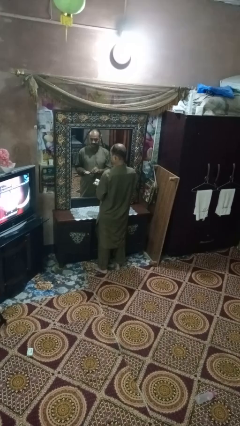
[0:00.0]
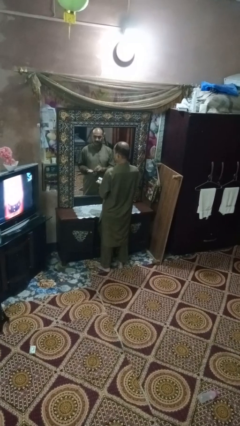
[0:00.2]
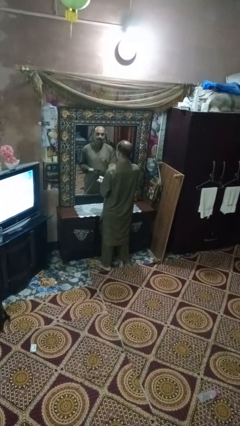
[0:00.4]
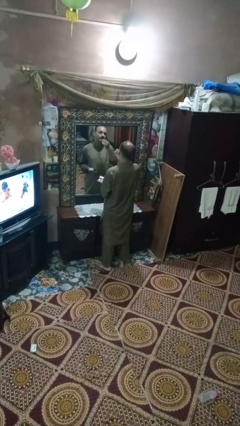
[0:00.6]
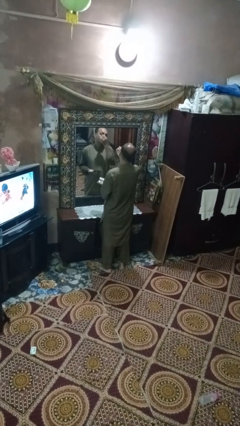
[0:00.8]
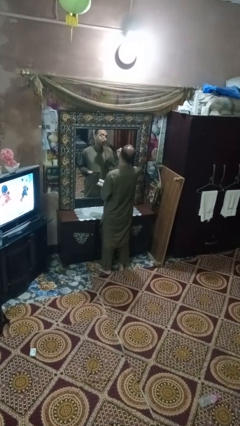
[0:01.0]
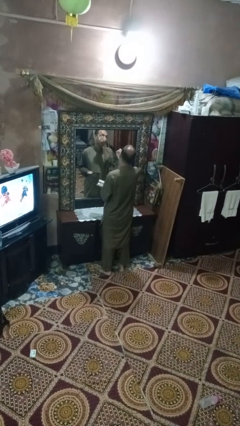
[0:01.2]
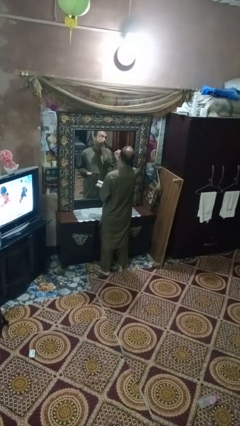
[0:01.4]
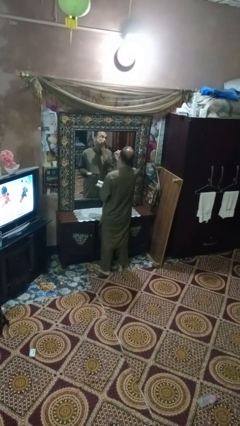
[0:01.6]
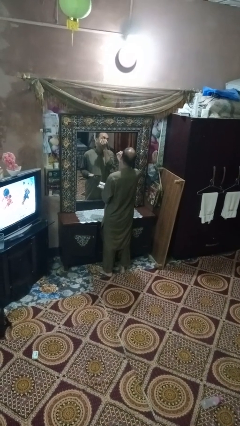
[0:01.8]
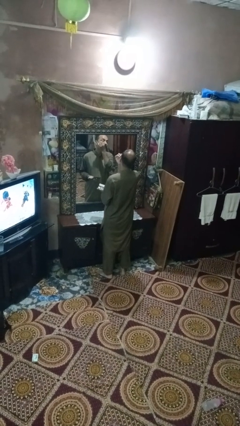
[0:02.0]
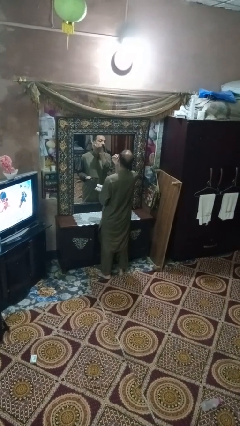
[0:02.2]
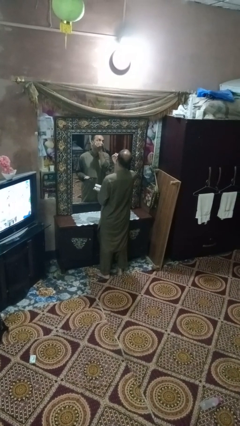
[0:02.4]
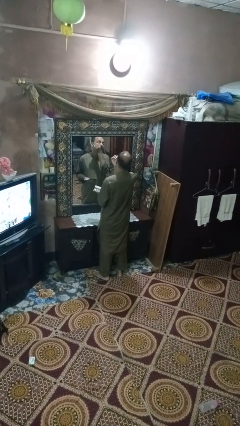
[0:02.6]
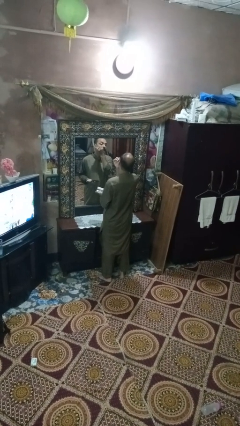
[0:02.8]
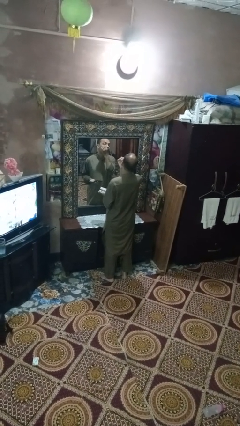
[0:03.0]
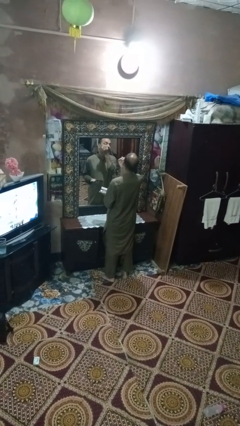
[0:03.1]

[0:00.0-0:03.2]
person applies eye makeup

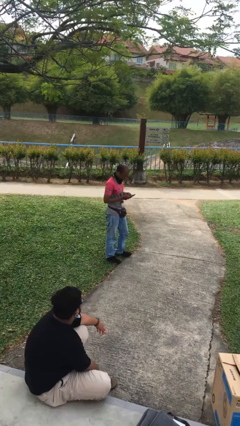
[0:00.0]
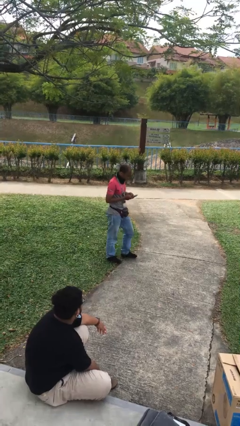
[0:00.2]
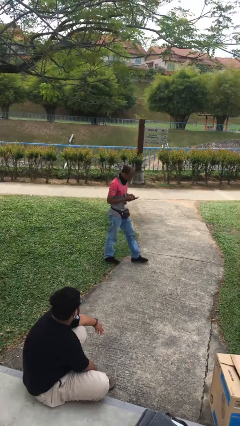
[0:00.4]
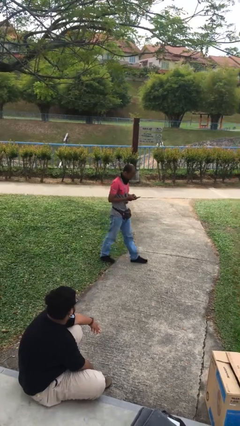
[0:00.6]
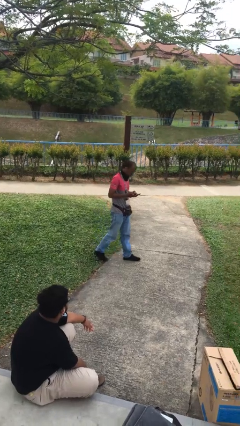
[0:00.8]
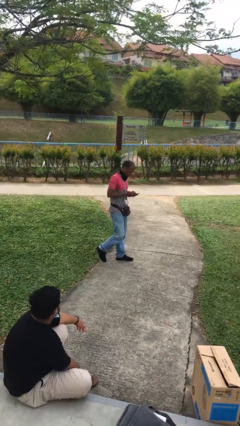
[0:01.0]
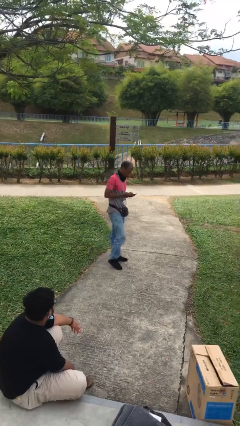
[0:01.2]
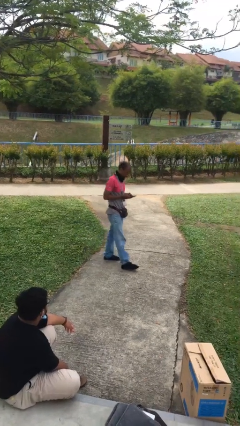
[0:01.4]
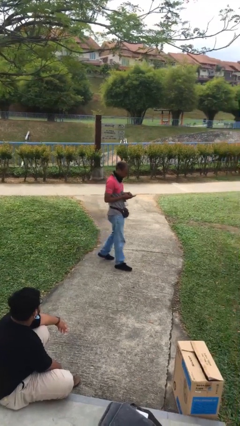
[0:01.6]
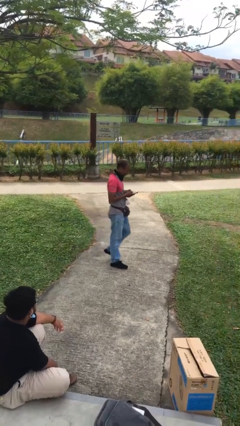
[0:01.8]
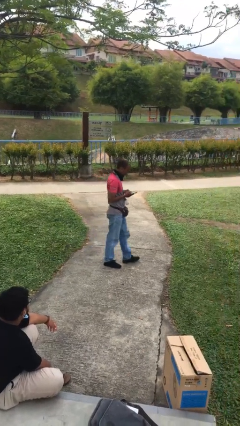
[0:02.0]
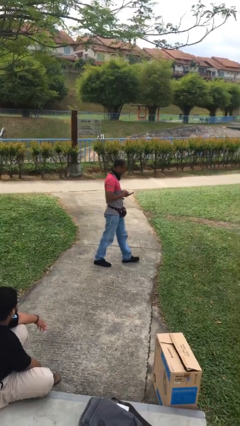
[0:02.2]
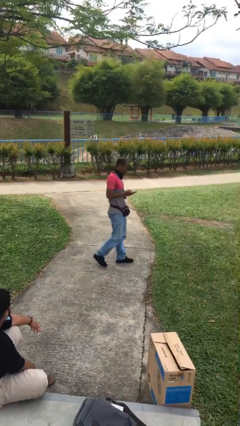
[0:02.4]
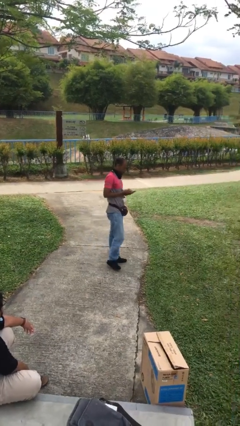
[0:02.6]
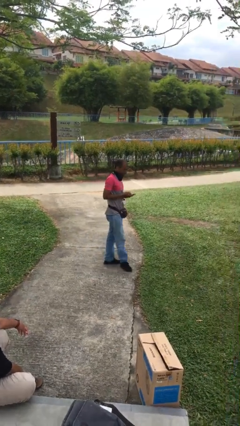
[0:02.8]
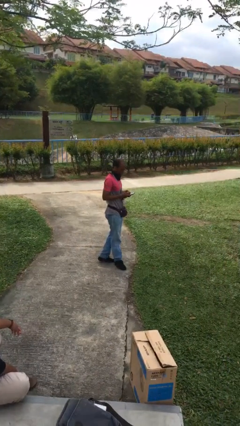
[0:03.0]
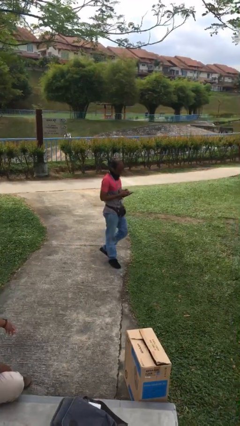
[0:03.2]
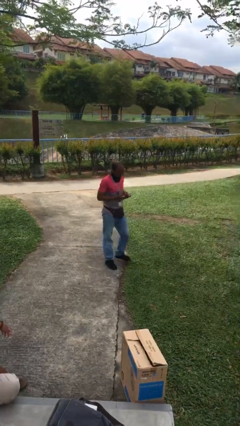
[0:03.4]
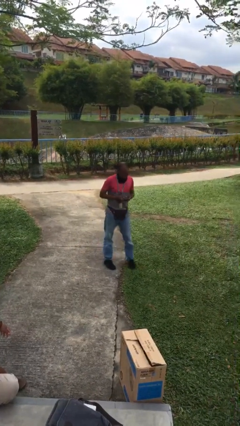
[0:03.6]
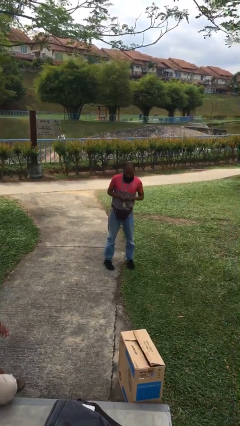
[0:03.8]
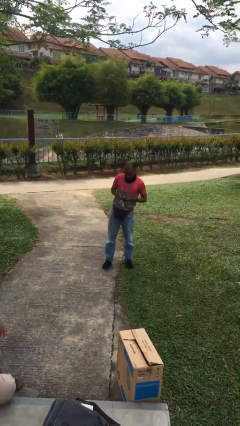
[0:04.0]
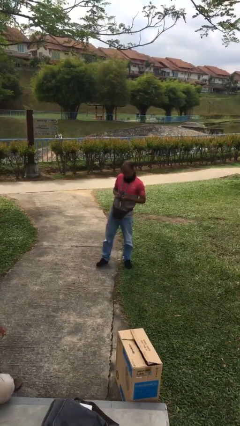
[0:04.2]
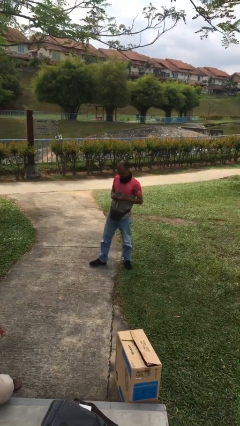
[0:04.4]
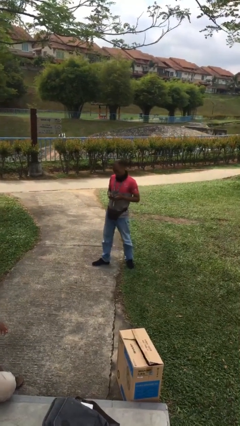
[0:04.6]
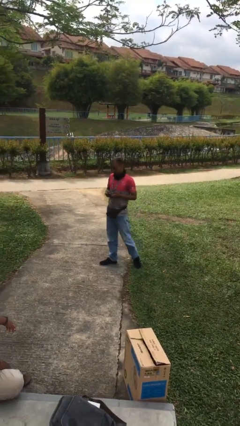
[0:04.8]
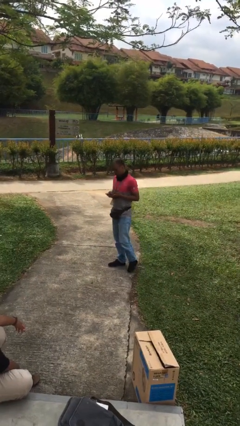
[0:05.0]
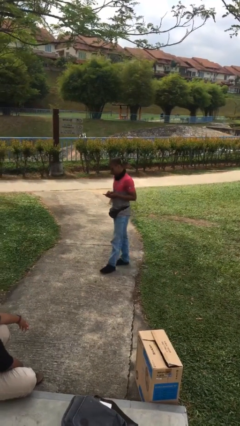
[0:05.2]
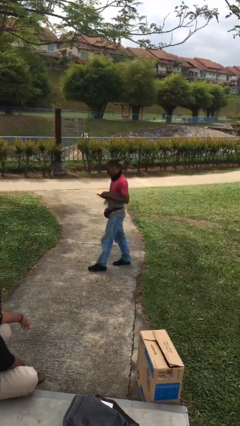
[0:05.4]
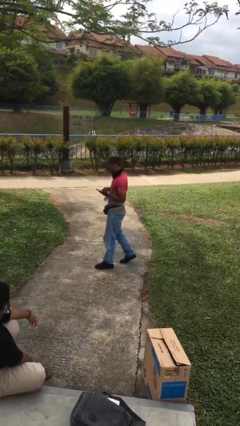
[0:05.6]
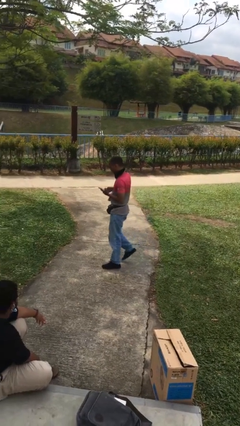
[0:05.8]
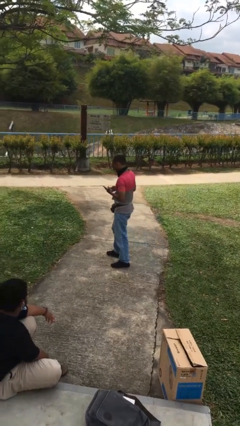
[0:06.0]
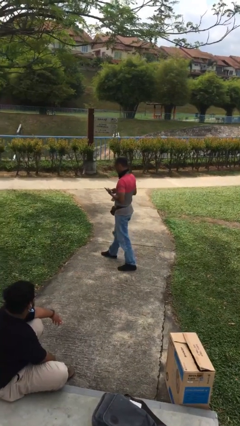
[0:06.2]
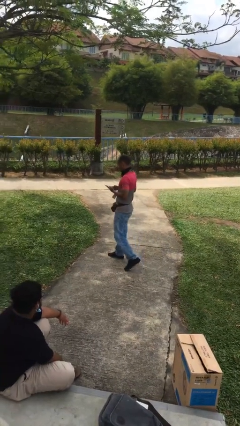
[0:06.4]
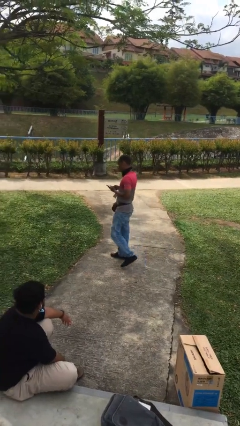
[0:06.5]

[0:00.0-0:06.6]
person texts on phone

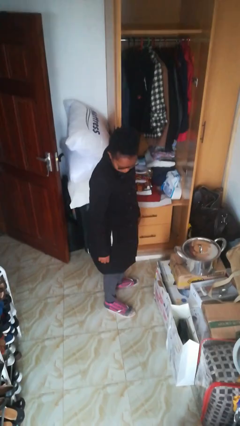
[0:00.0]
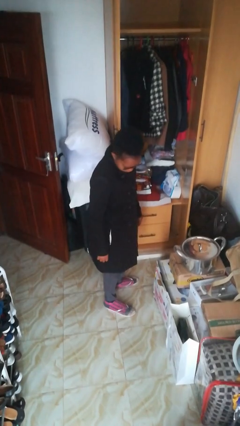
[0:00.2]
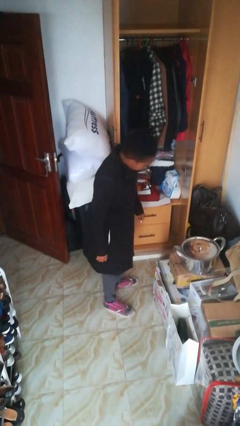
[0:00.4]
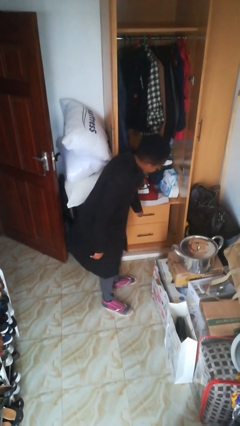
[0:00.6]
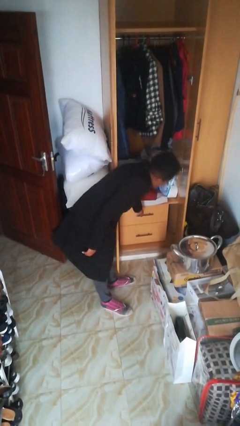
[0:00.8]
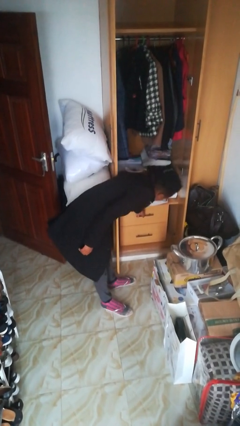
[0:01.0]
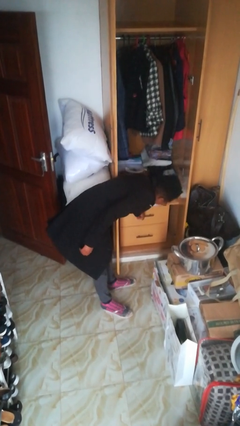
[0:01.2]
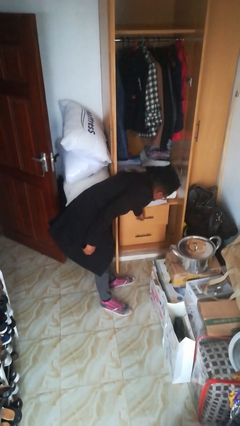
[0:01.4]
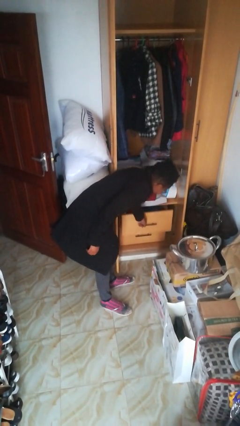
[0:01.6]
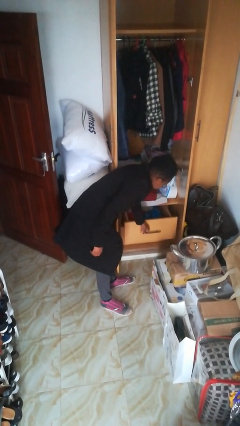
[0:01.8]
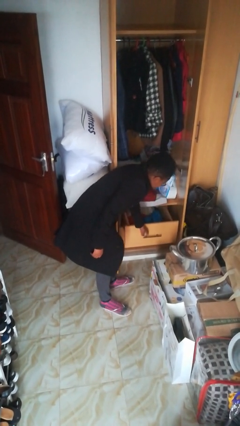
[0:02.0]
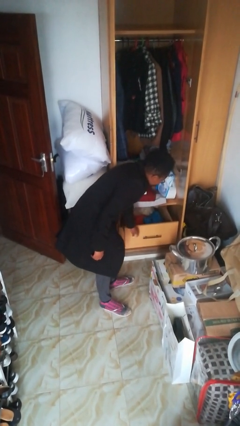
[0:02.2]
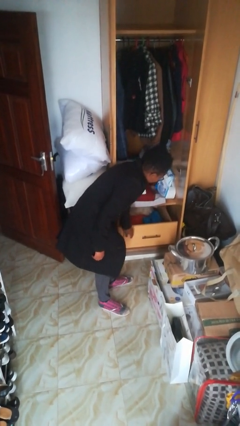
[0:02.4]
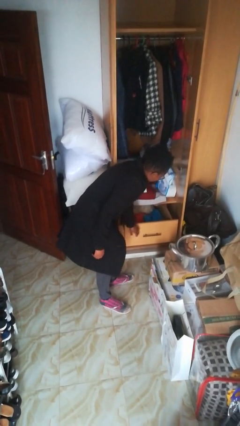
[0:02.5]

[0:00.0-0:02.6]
person opens dresser drawer

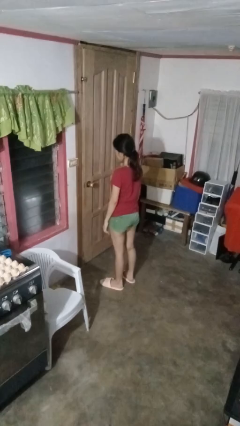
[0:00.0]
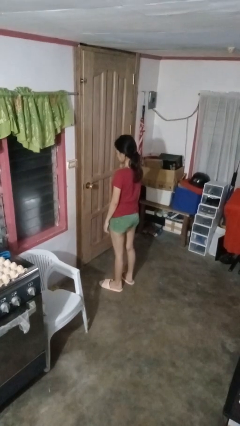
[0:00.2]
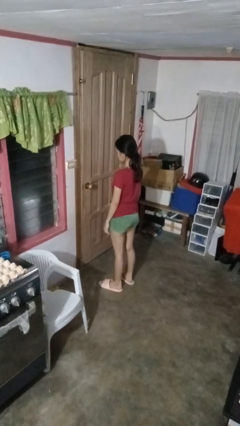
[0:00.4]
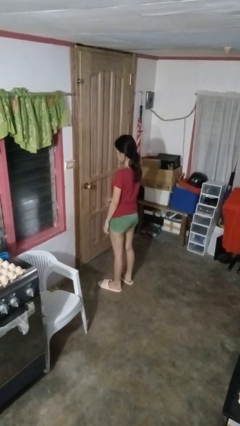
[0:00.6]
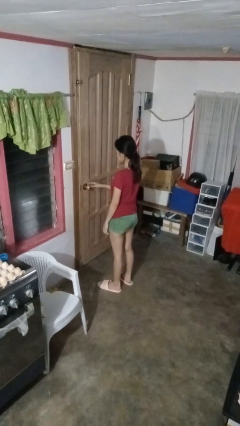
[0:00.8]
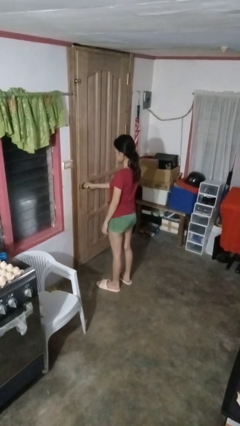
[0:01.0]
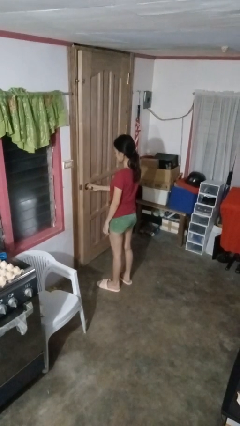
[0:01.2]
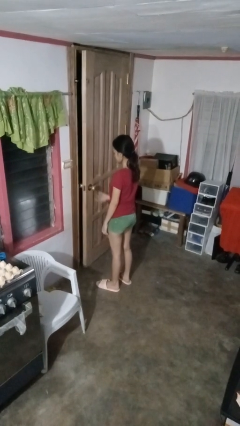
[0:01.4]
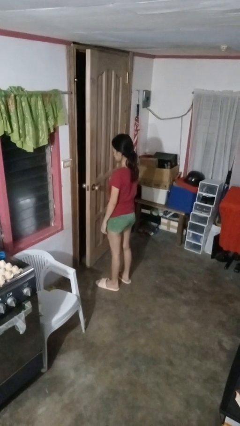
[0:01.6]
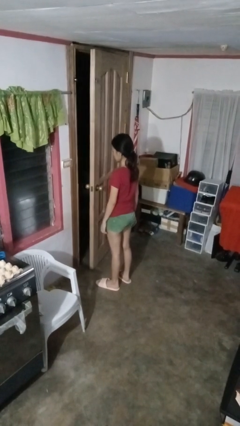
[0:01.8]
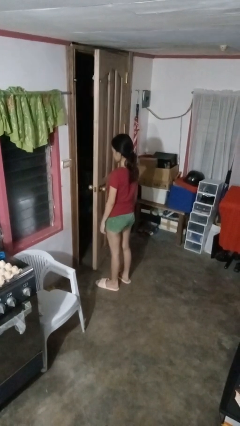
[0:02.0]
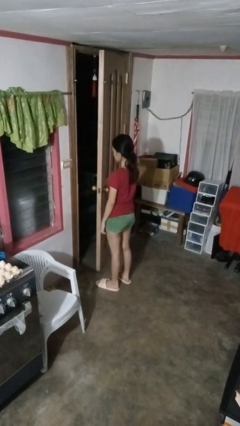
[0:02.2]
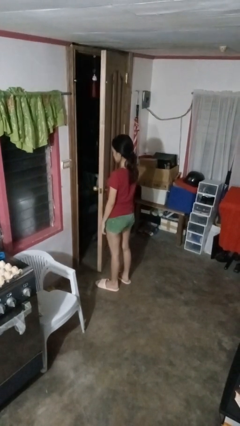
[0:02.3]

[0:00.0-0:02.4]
person opens facility door

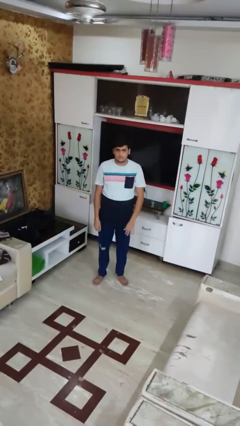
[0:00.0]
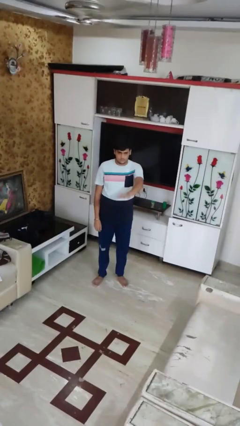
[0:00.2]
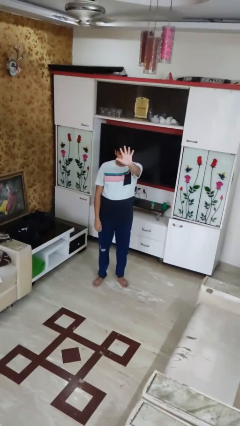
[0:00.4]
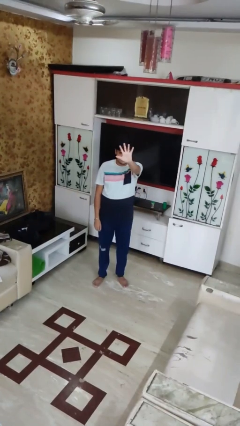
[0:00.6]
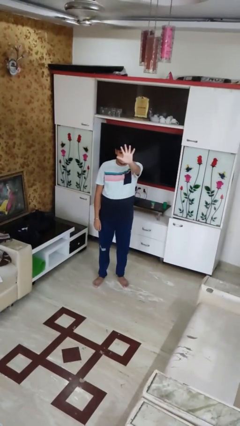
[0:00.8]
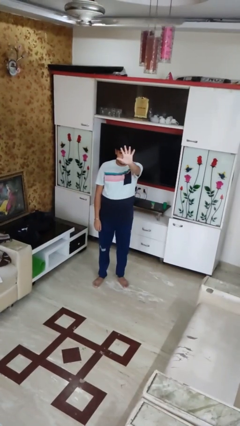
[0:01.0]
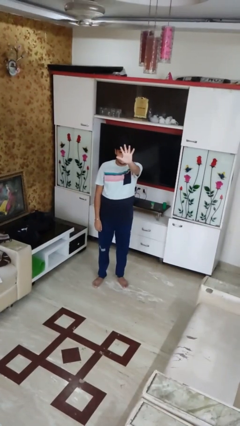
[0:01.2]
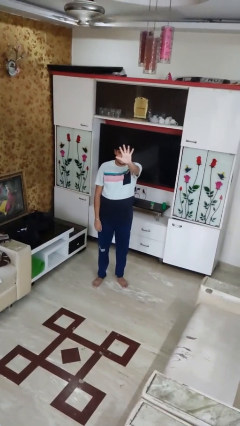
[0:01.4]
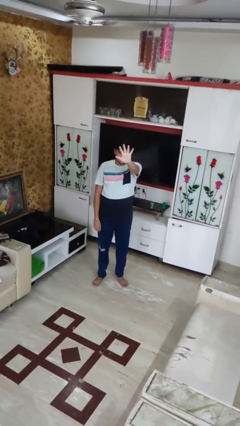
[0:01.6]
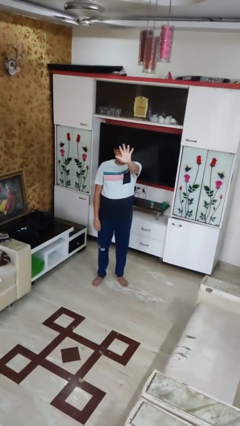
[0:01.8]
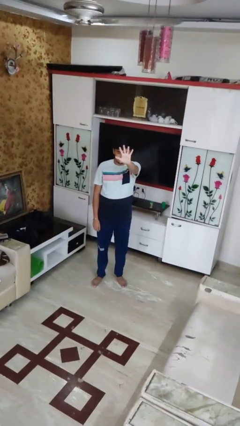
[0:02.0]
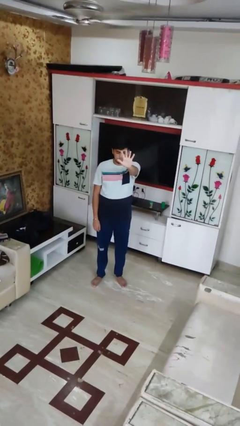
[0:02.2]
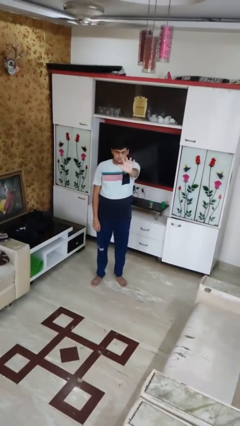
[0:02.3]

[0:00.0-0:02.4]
person gestures number five

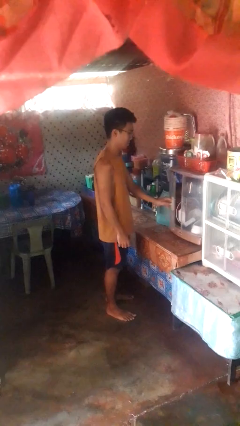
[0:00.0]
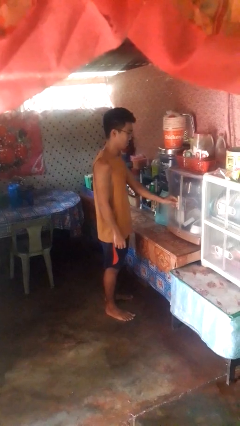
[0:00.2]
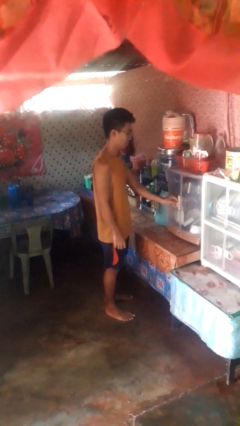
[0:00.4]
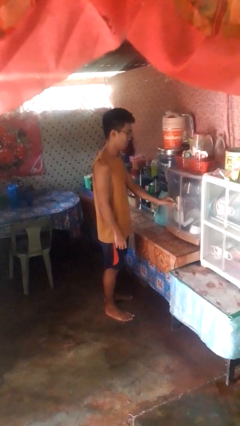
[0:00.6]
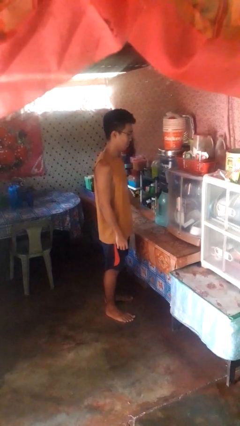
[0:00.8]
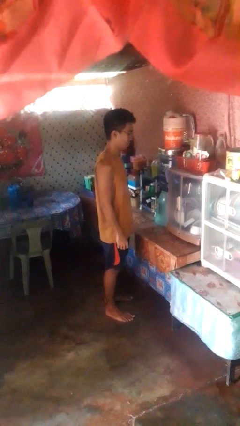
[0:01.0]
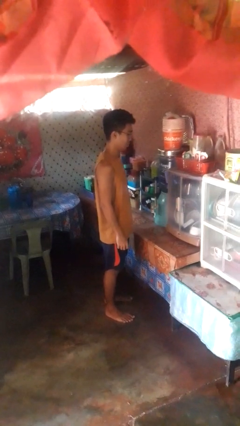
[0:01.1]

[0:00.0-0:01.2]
person closes cabinet
